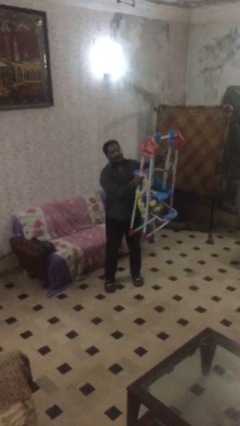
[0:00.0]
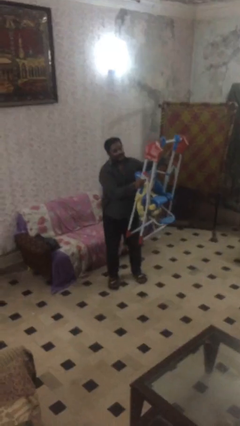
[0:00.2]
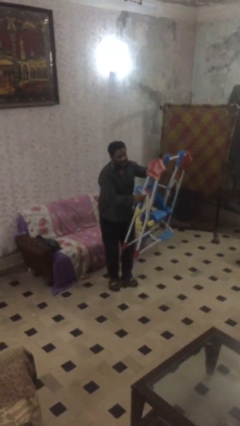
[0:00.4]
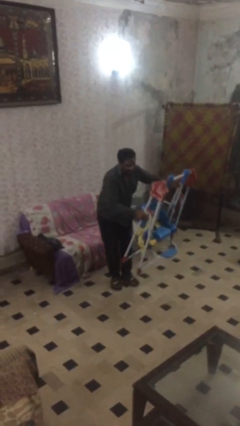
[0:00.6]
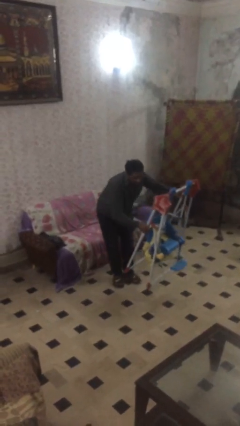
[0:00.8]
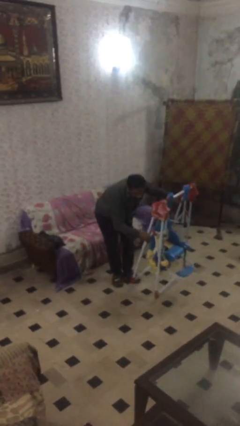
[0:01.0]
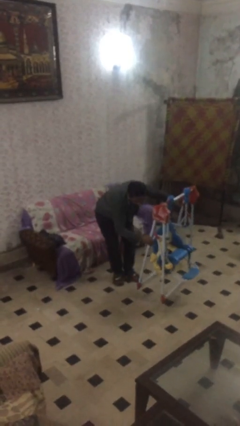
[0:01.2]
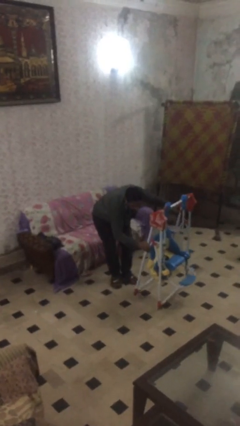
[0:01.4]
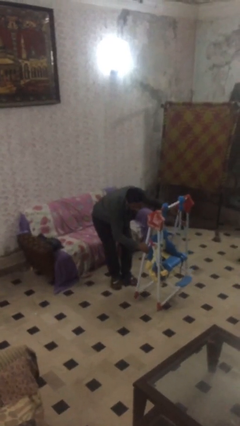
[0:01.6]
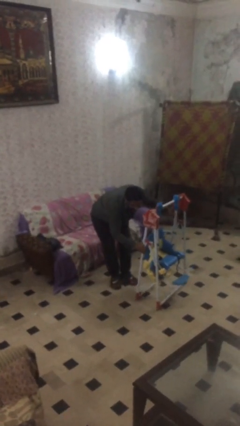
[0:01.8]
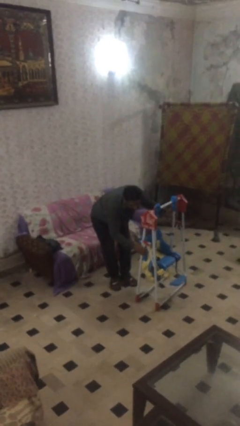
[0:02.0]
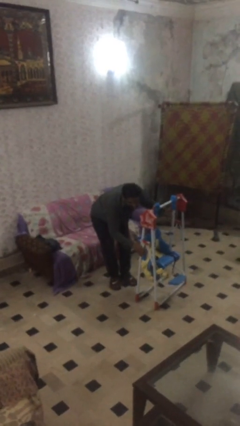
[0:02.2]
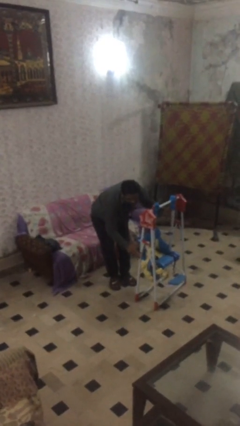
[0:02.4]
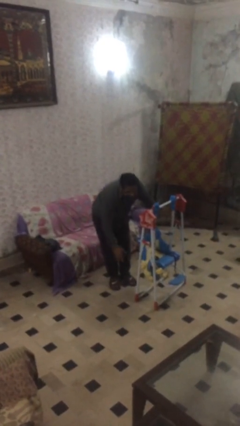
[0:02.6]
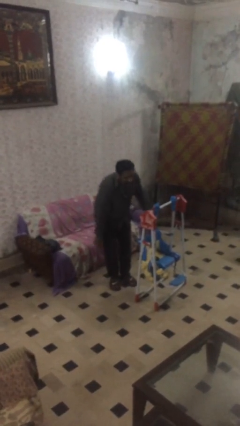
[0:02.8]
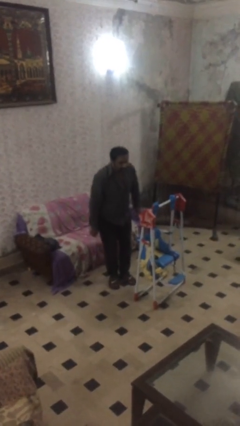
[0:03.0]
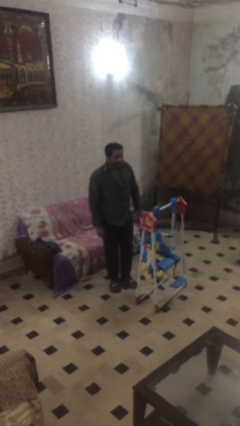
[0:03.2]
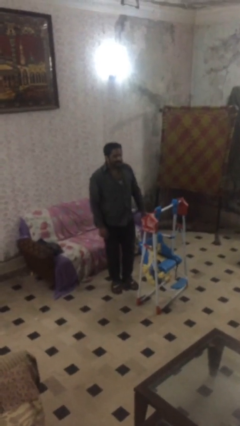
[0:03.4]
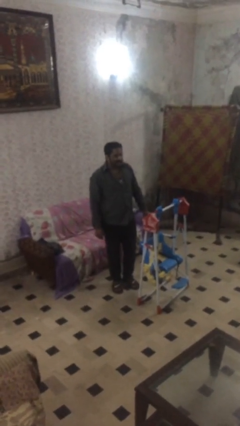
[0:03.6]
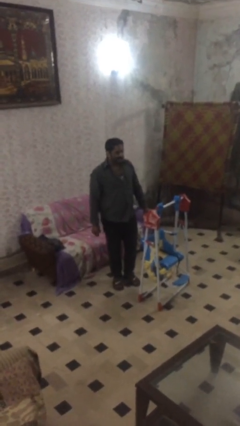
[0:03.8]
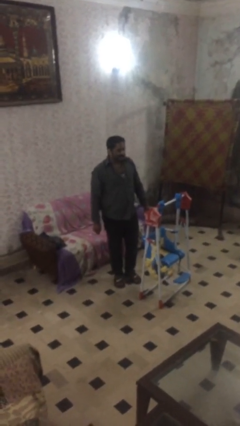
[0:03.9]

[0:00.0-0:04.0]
person puts down object on floor

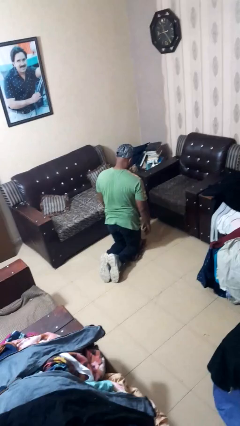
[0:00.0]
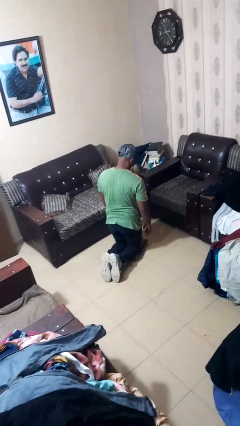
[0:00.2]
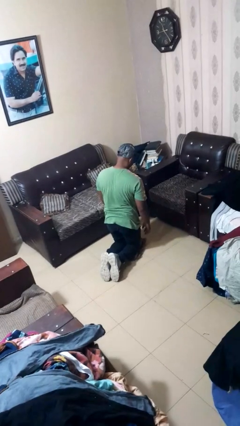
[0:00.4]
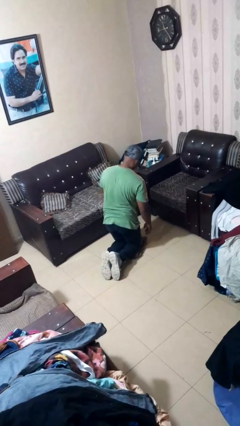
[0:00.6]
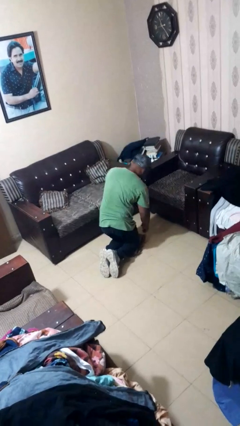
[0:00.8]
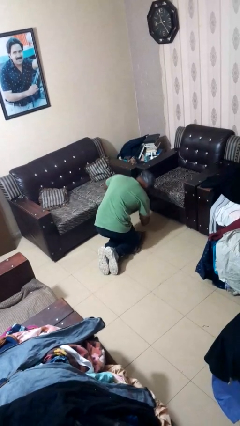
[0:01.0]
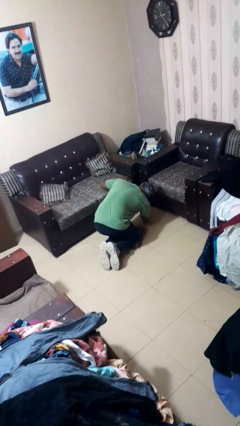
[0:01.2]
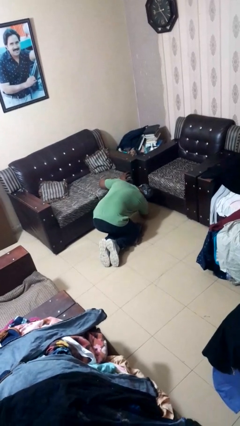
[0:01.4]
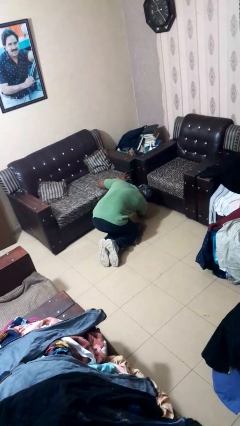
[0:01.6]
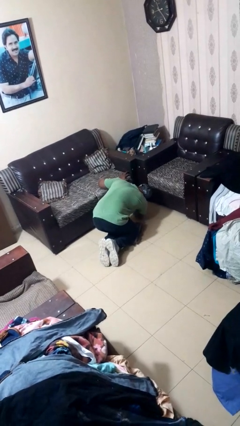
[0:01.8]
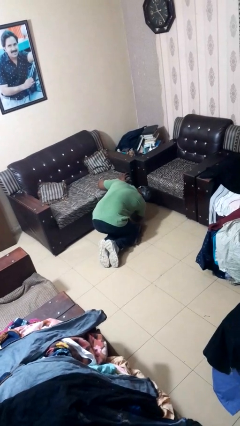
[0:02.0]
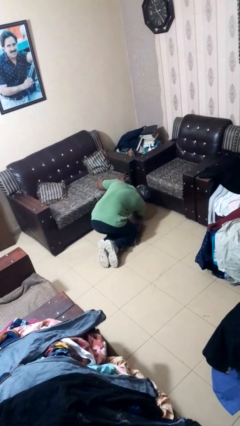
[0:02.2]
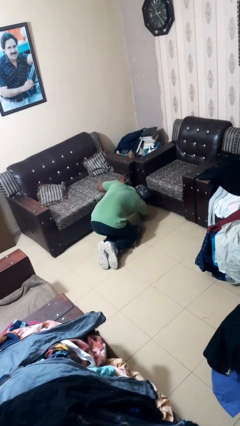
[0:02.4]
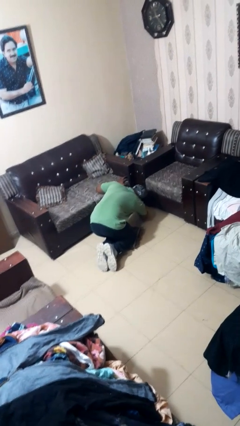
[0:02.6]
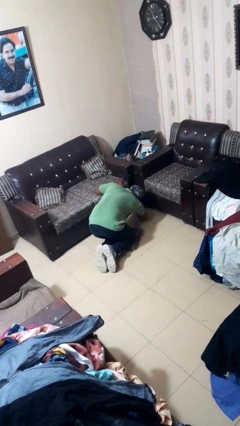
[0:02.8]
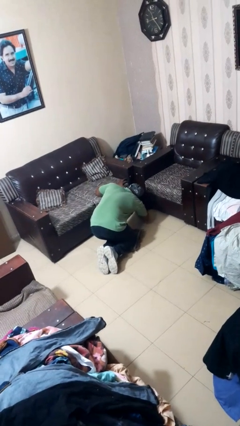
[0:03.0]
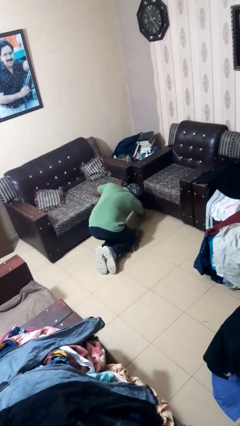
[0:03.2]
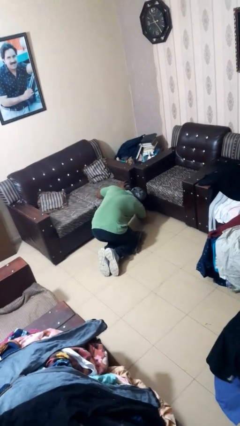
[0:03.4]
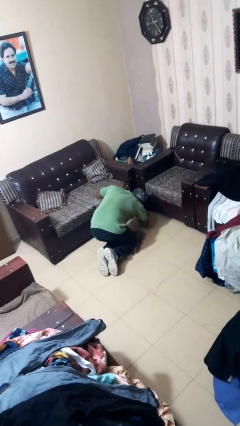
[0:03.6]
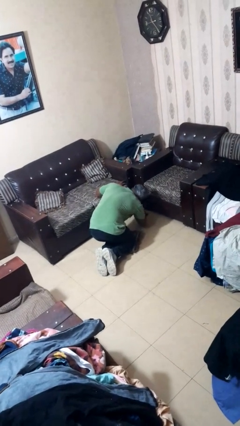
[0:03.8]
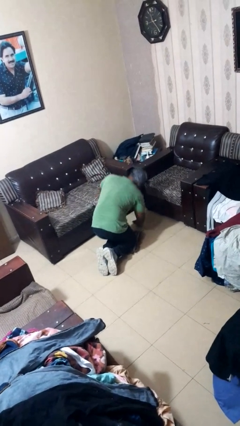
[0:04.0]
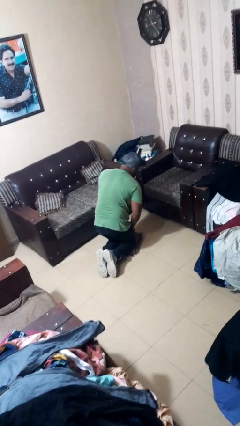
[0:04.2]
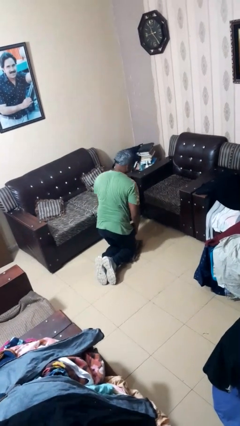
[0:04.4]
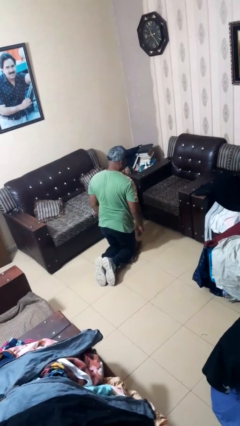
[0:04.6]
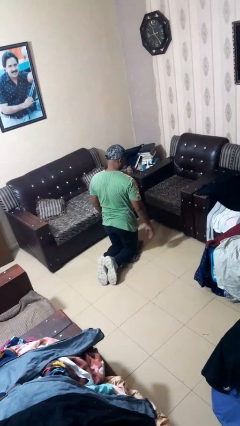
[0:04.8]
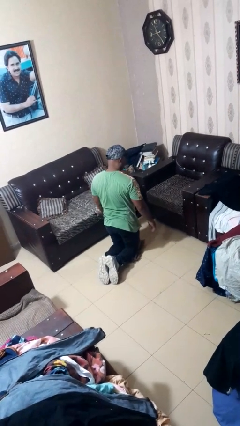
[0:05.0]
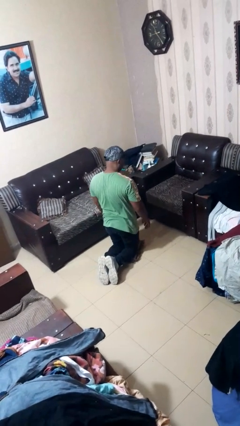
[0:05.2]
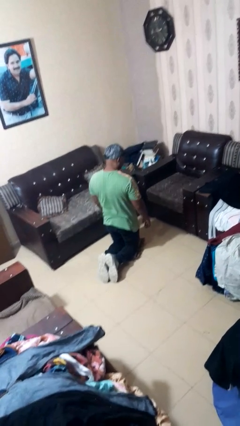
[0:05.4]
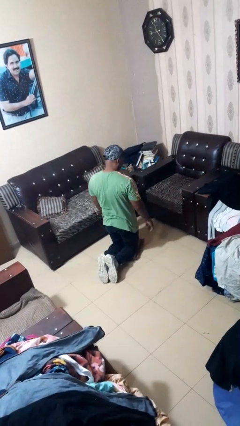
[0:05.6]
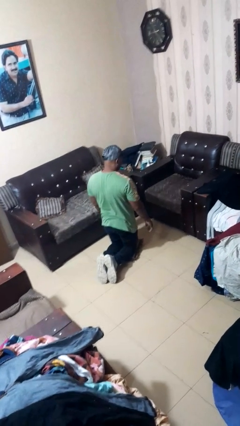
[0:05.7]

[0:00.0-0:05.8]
person searches under couch

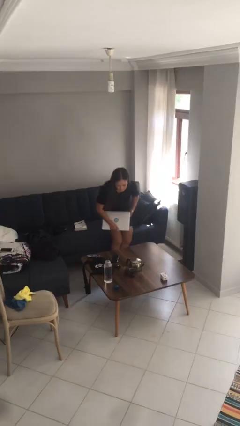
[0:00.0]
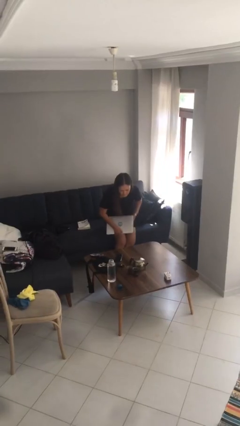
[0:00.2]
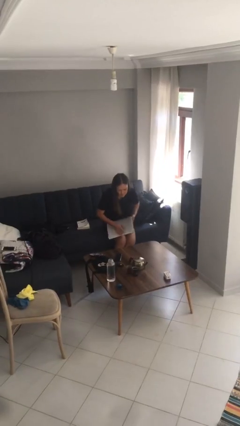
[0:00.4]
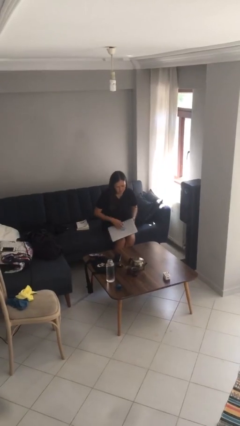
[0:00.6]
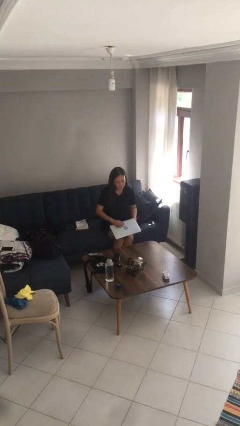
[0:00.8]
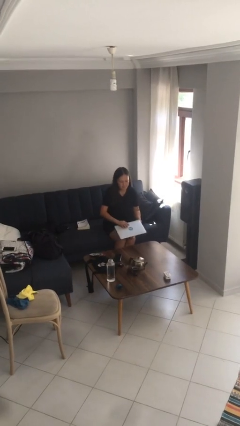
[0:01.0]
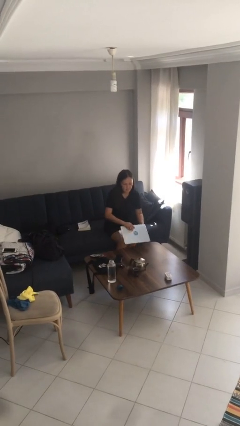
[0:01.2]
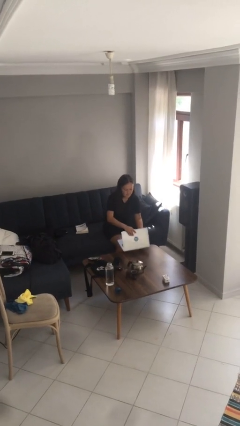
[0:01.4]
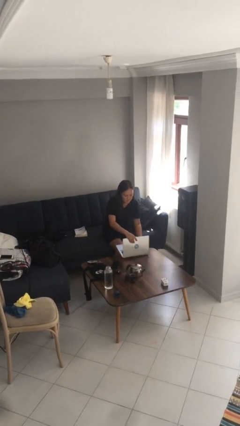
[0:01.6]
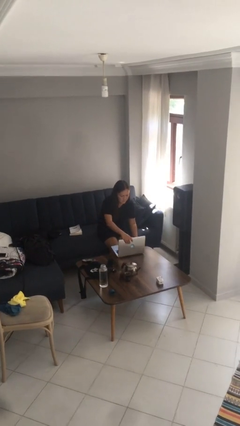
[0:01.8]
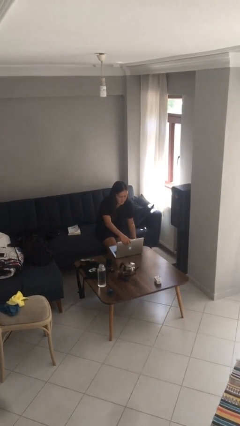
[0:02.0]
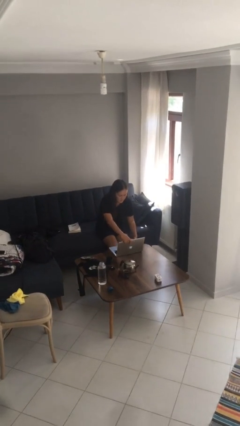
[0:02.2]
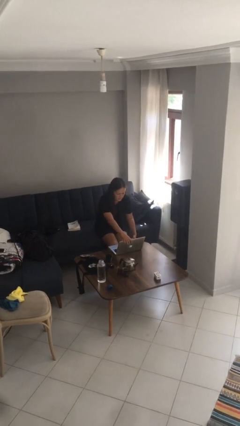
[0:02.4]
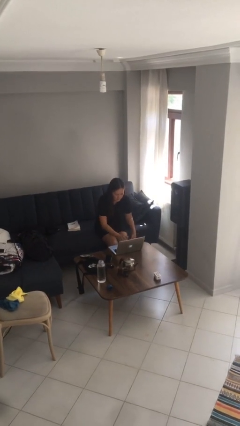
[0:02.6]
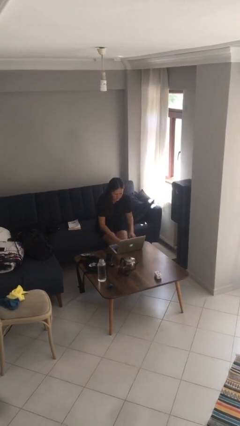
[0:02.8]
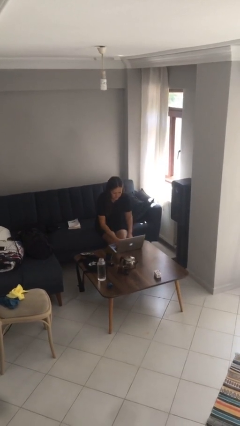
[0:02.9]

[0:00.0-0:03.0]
person sits down

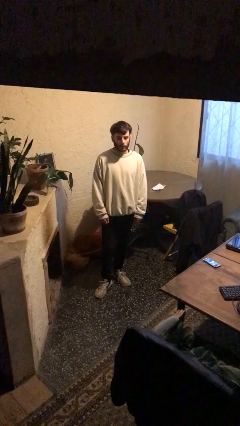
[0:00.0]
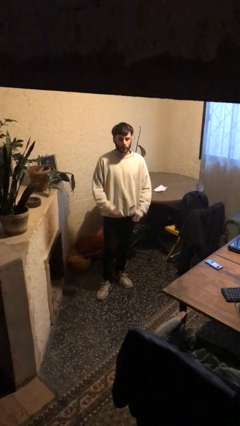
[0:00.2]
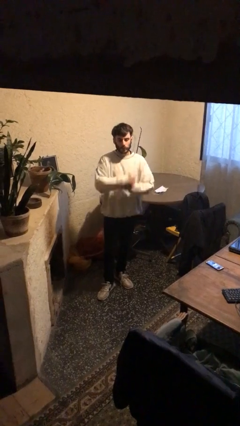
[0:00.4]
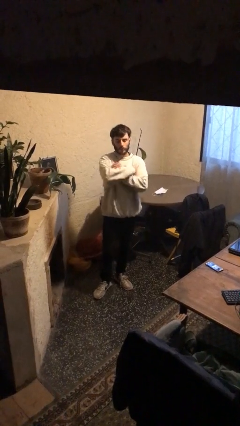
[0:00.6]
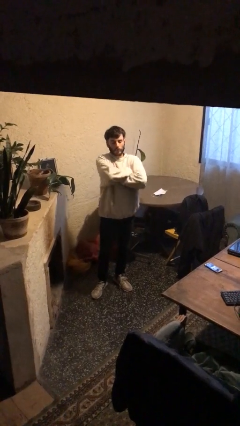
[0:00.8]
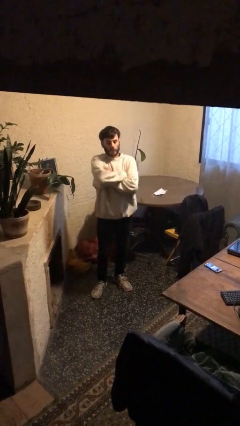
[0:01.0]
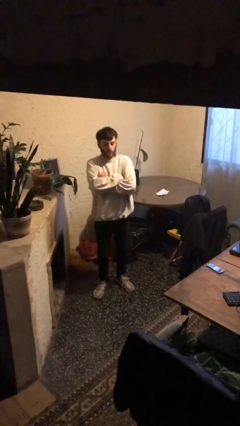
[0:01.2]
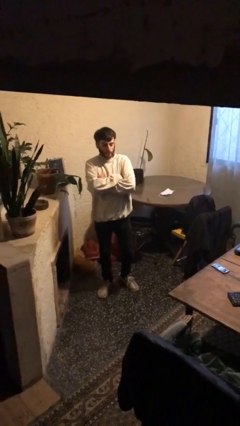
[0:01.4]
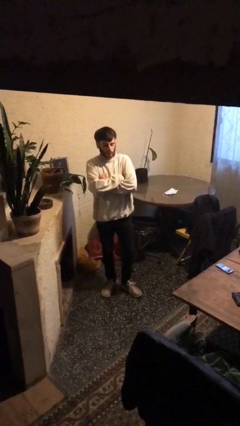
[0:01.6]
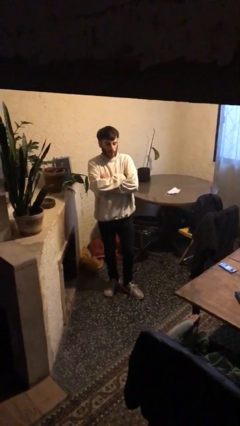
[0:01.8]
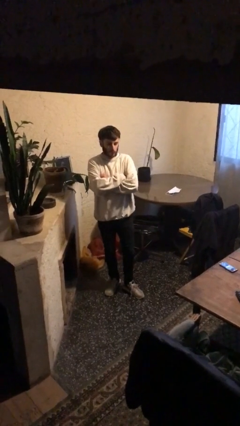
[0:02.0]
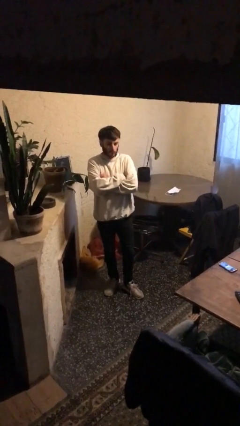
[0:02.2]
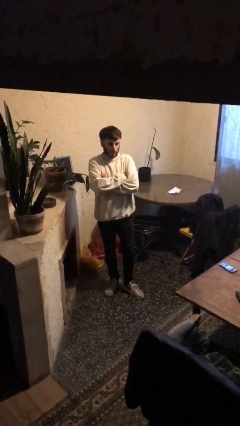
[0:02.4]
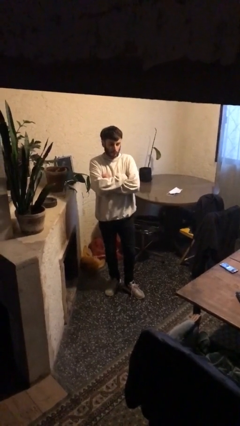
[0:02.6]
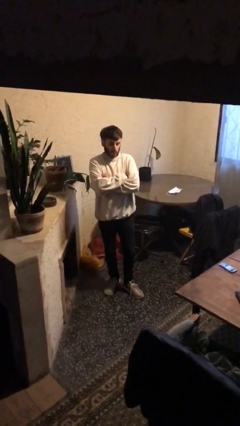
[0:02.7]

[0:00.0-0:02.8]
person crosses arms

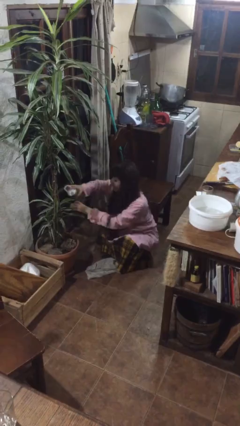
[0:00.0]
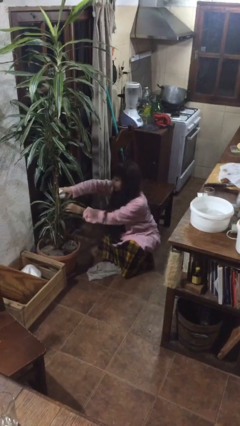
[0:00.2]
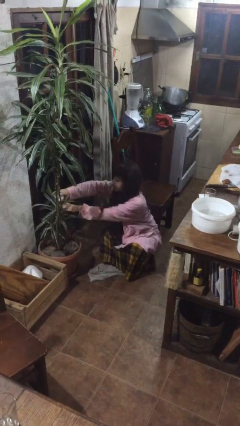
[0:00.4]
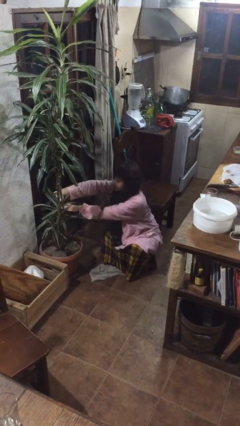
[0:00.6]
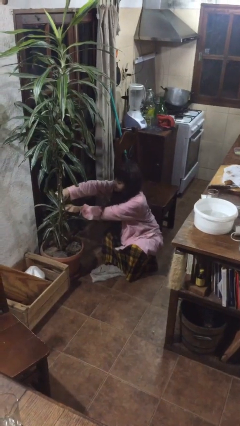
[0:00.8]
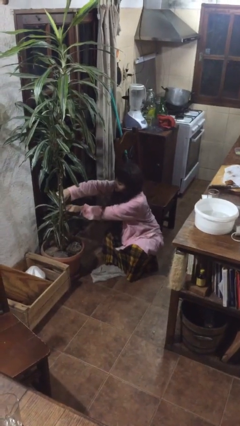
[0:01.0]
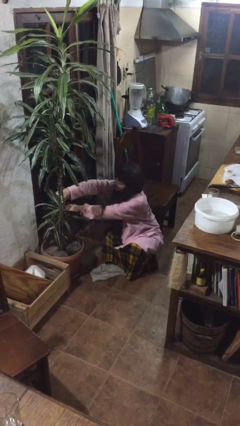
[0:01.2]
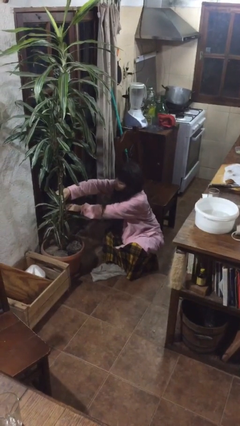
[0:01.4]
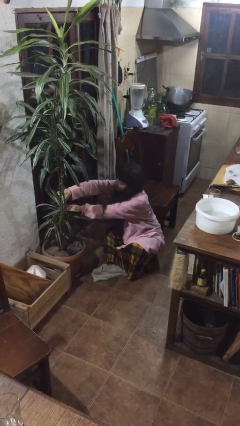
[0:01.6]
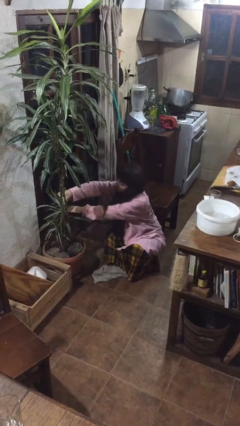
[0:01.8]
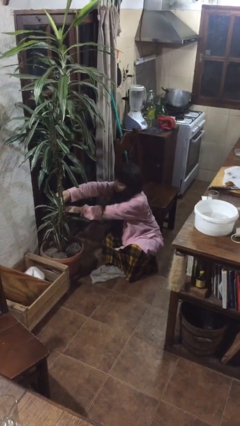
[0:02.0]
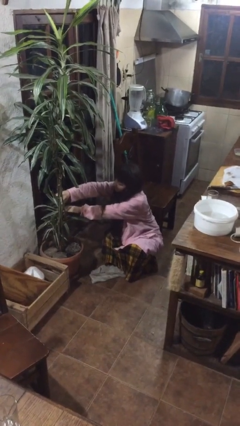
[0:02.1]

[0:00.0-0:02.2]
person waters houseplant

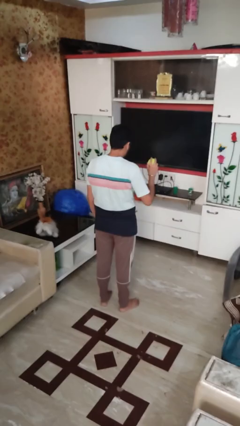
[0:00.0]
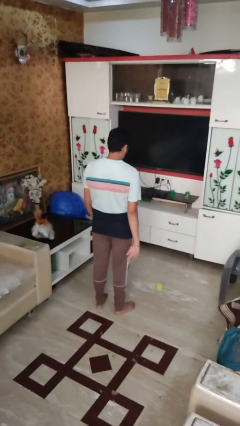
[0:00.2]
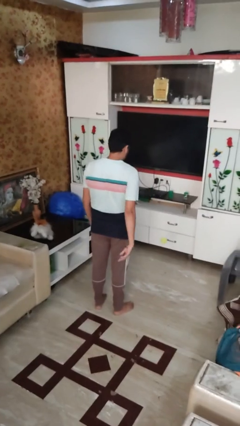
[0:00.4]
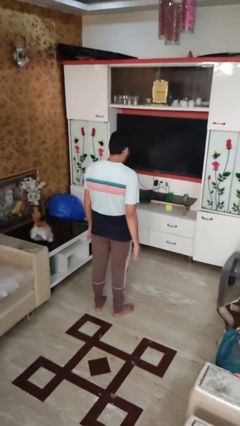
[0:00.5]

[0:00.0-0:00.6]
person bounces ball on floor
